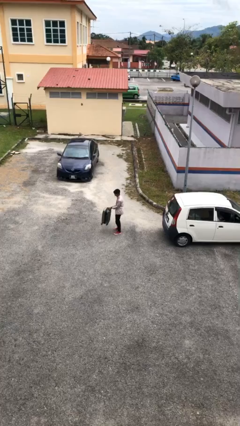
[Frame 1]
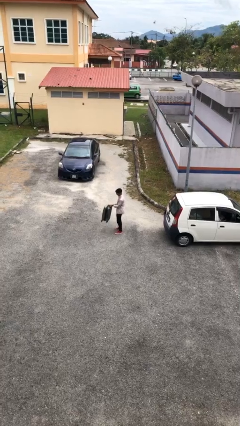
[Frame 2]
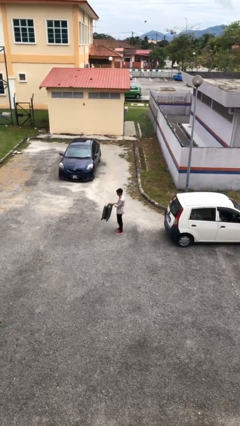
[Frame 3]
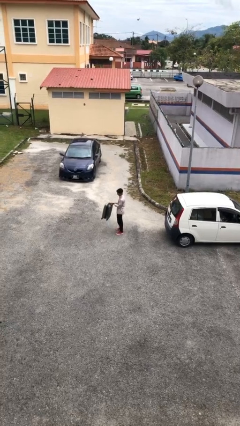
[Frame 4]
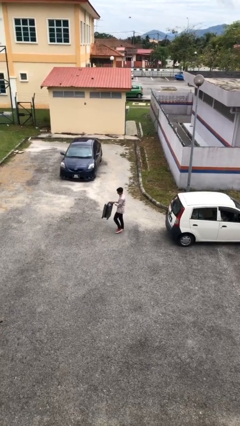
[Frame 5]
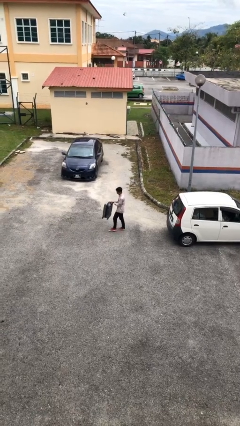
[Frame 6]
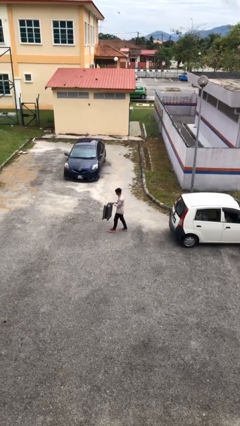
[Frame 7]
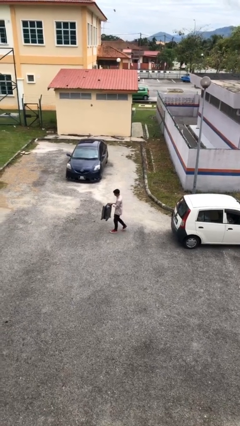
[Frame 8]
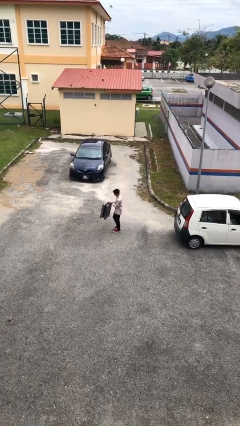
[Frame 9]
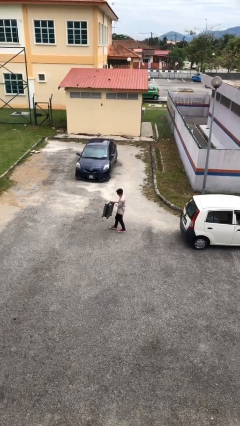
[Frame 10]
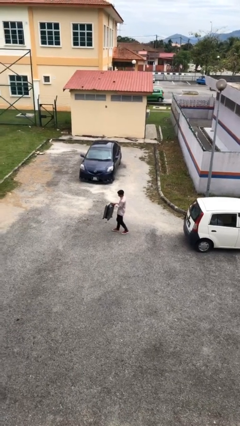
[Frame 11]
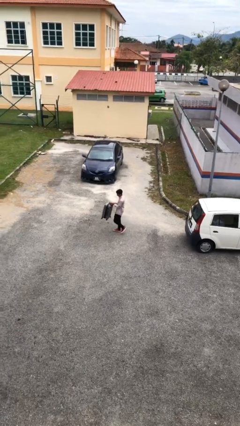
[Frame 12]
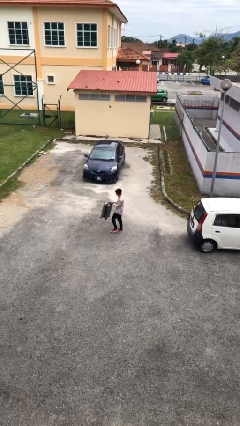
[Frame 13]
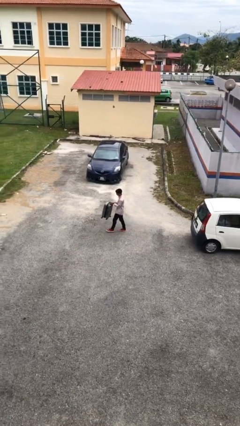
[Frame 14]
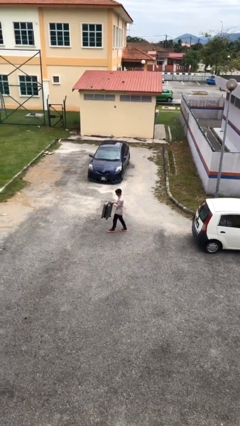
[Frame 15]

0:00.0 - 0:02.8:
person carries heavy object

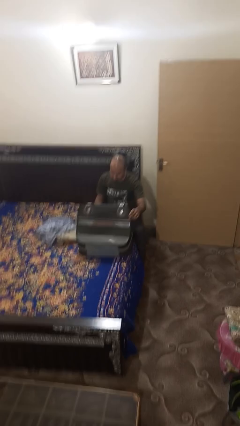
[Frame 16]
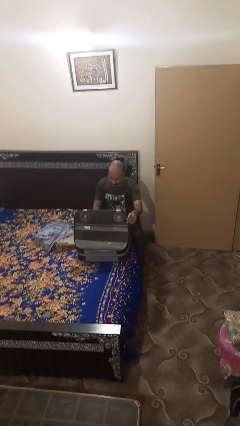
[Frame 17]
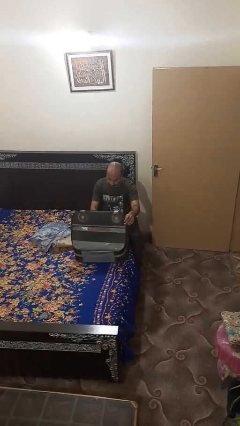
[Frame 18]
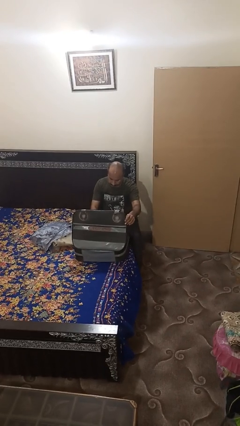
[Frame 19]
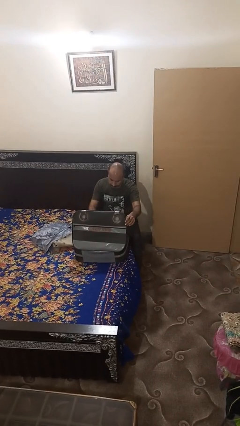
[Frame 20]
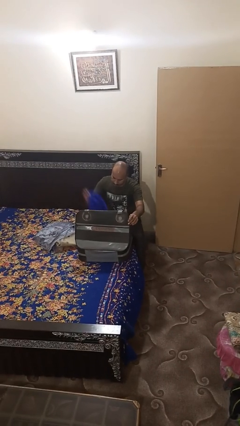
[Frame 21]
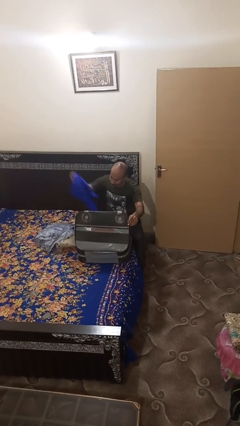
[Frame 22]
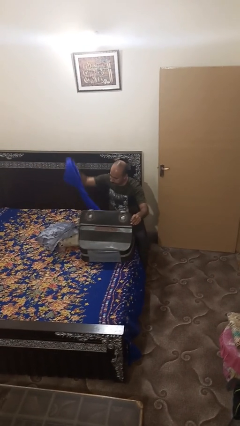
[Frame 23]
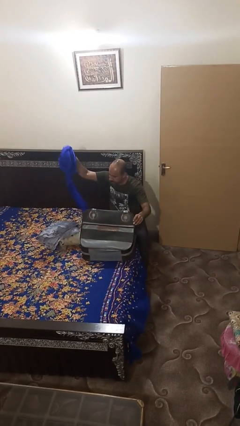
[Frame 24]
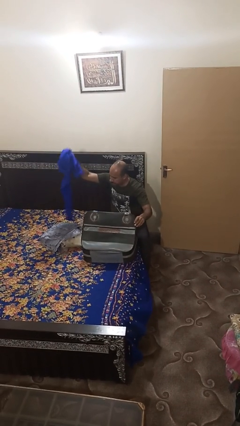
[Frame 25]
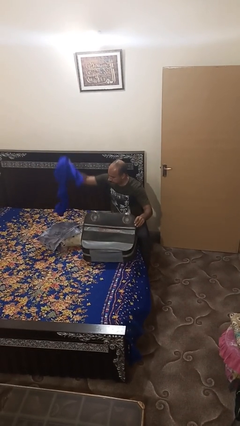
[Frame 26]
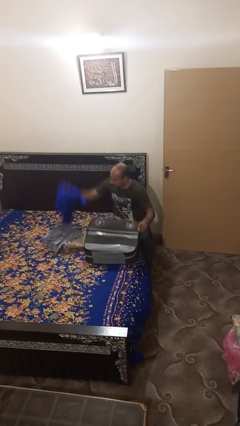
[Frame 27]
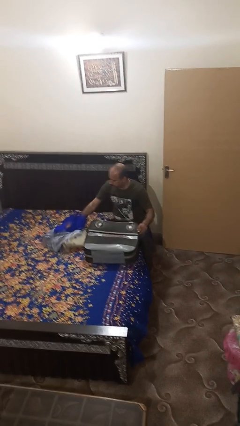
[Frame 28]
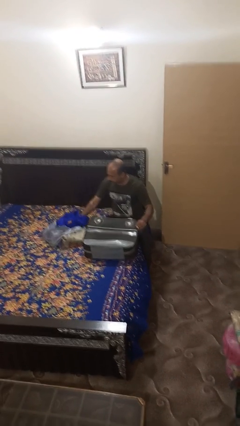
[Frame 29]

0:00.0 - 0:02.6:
person unloads clothes from suitcase

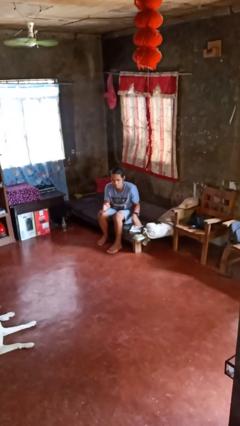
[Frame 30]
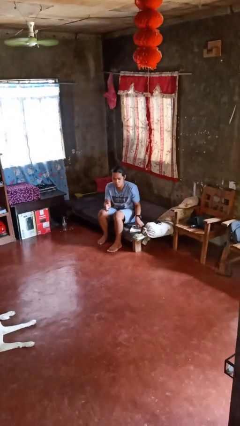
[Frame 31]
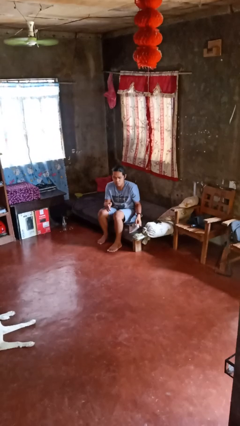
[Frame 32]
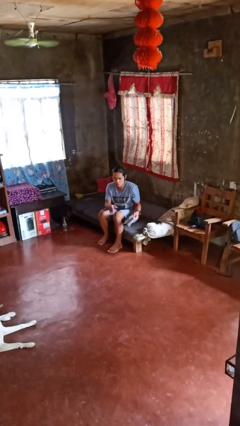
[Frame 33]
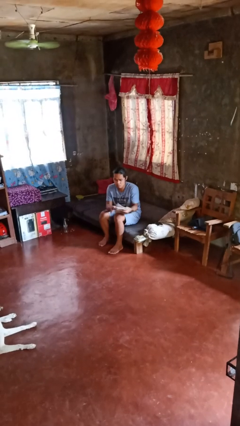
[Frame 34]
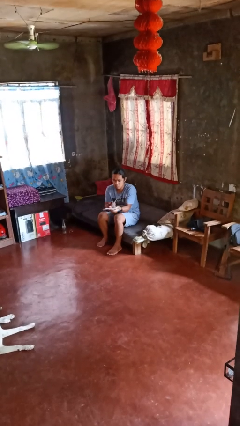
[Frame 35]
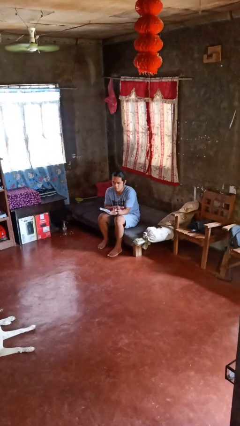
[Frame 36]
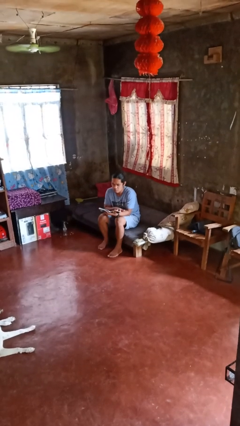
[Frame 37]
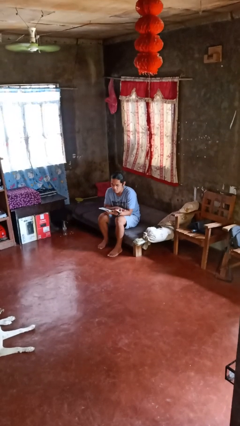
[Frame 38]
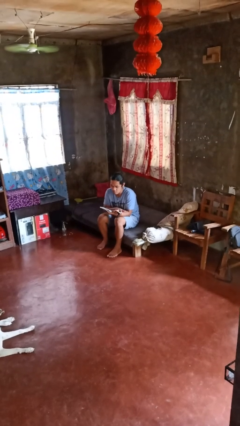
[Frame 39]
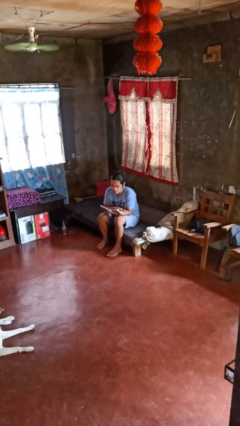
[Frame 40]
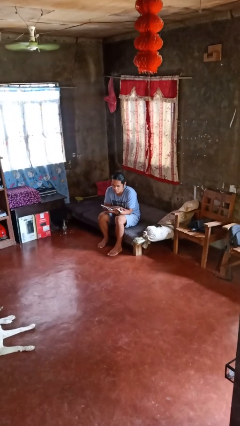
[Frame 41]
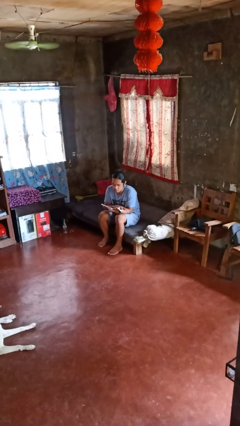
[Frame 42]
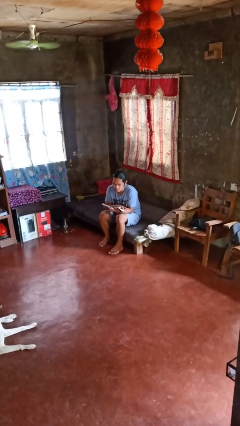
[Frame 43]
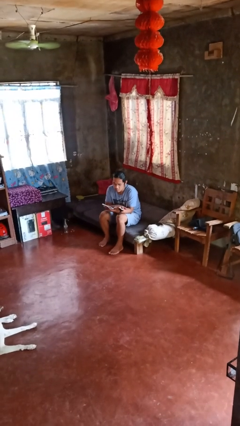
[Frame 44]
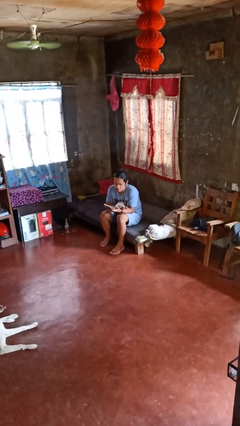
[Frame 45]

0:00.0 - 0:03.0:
person reads magazine

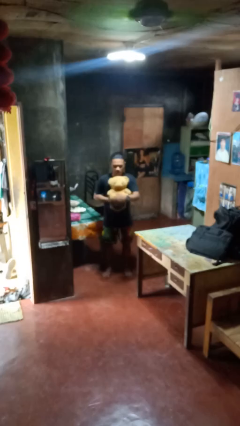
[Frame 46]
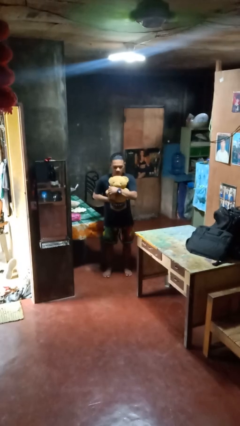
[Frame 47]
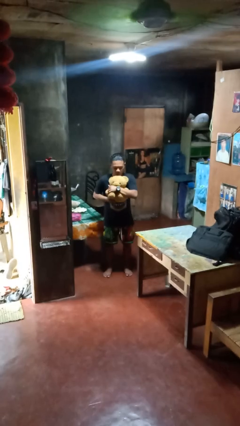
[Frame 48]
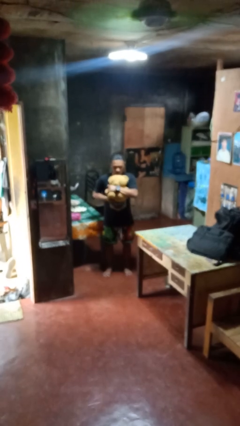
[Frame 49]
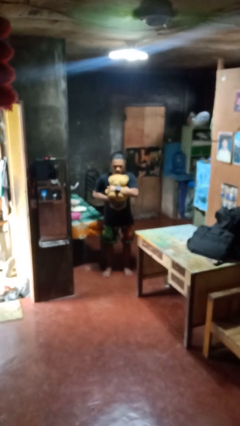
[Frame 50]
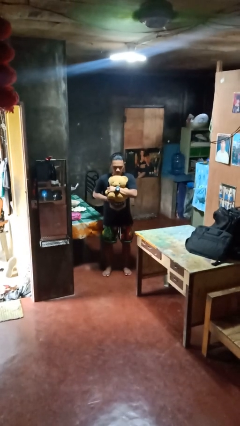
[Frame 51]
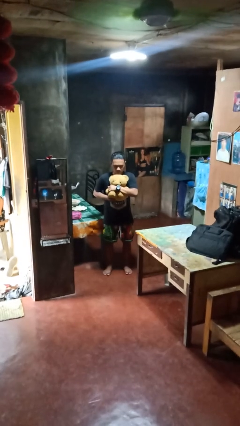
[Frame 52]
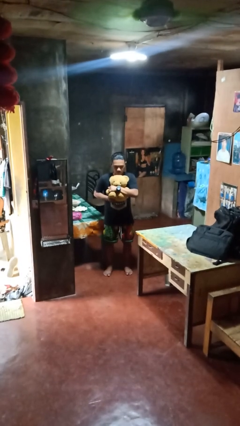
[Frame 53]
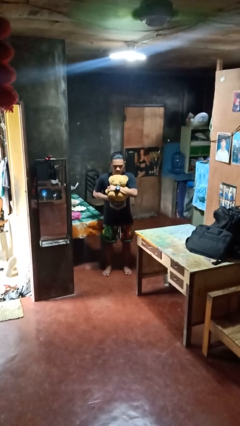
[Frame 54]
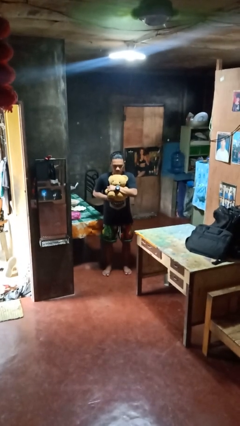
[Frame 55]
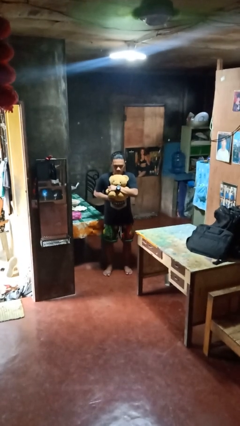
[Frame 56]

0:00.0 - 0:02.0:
person hugs stuffed animal

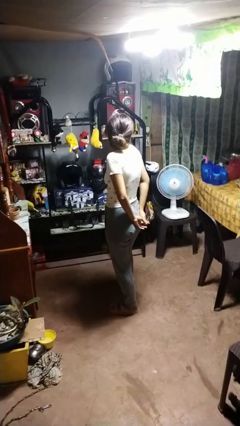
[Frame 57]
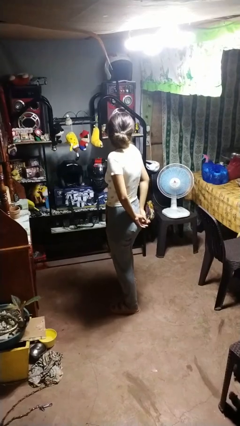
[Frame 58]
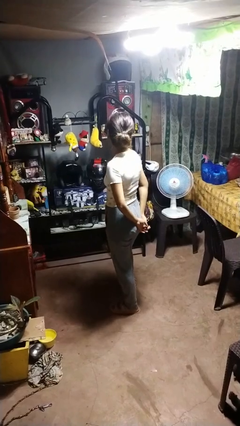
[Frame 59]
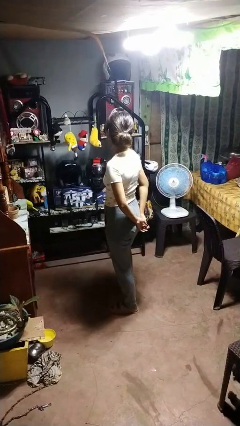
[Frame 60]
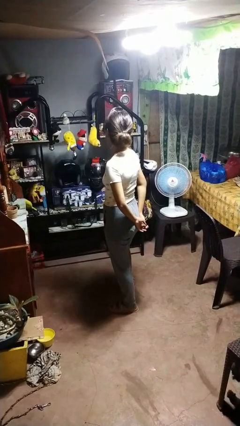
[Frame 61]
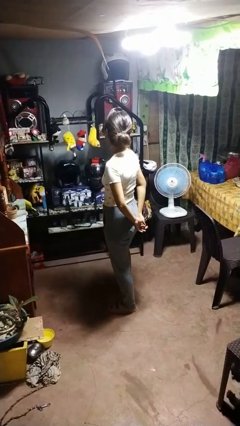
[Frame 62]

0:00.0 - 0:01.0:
person shrugs

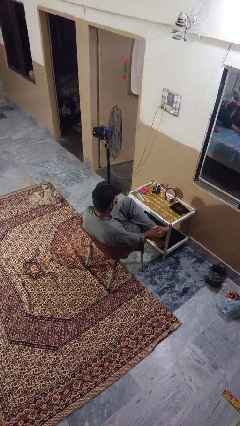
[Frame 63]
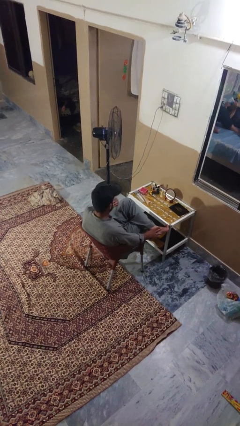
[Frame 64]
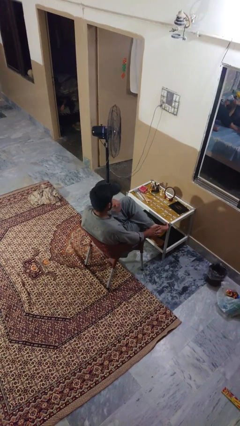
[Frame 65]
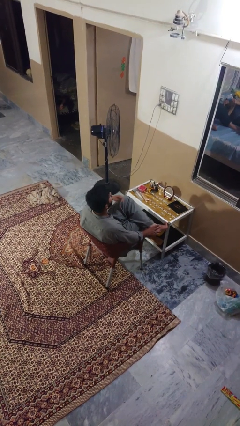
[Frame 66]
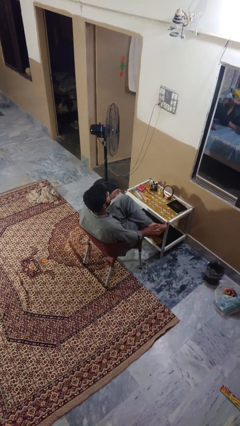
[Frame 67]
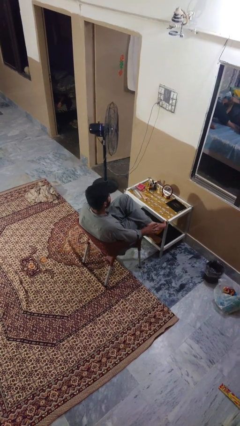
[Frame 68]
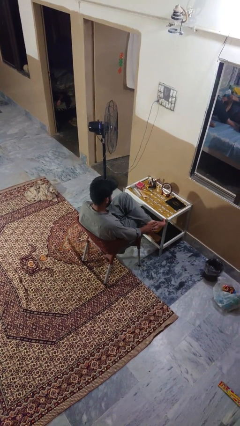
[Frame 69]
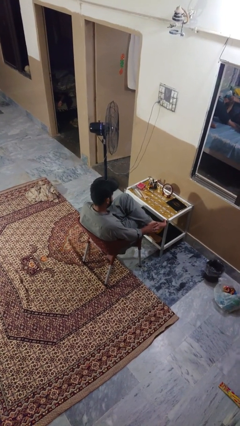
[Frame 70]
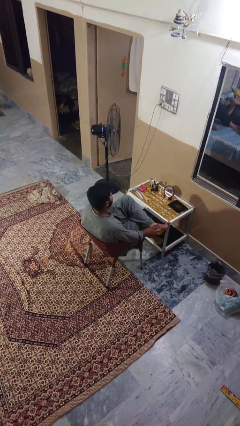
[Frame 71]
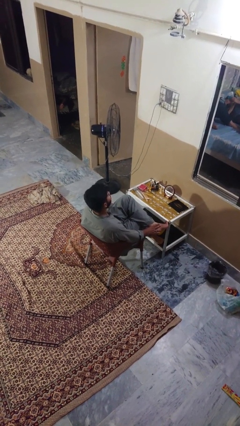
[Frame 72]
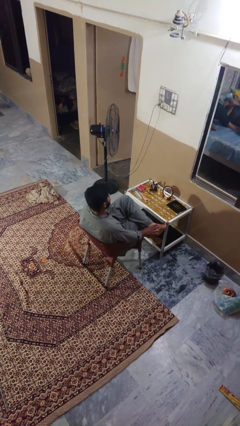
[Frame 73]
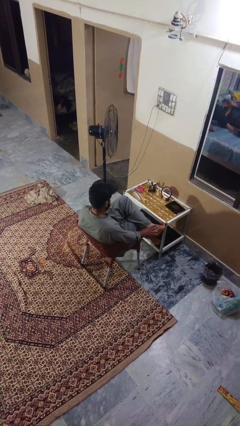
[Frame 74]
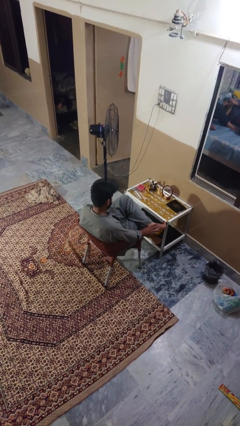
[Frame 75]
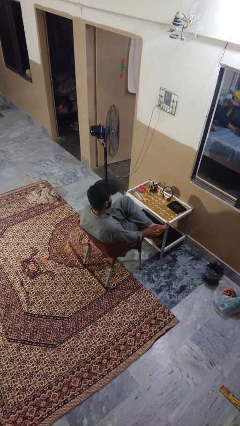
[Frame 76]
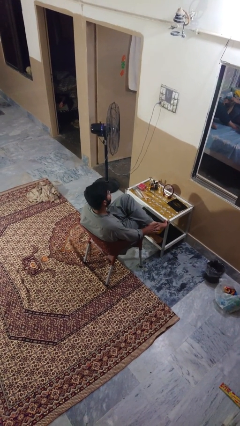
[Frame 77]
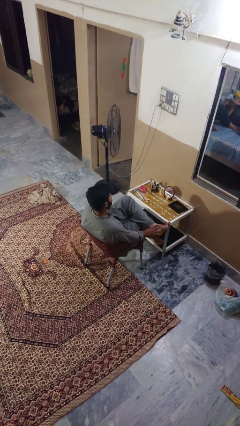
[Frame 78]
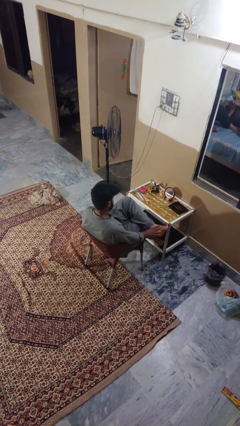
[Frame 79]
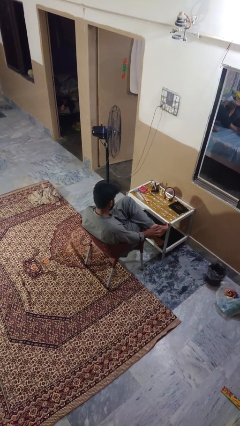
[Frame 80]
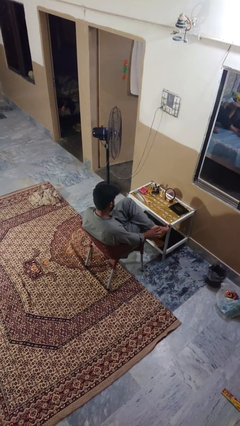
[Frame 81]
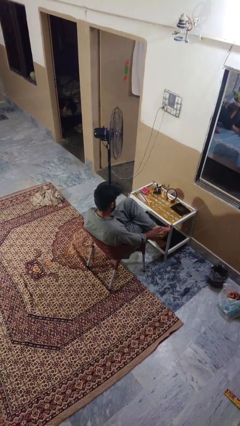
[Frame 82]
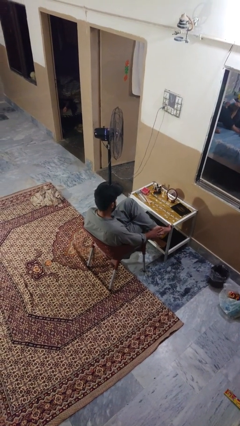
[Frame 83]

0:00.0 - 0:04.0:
person nods head

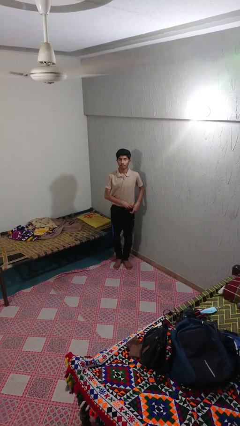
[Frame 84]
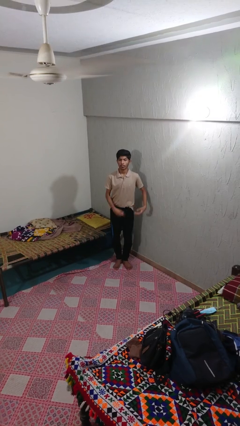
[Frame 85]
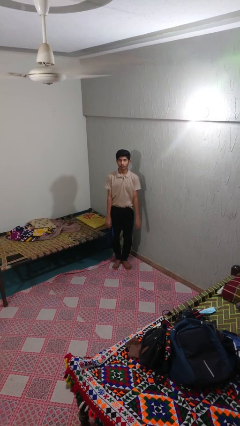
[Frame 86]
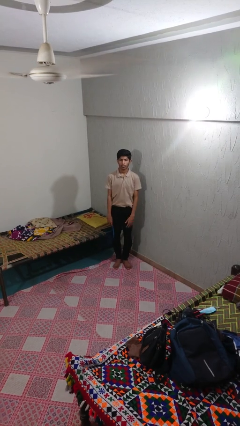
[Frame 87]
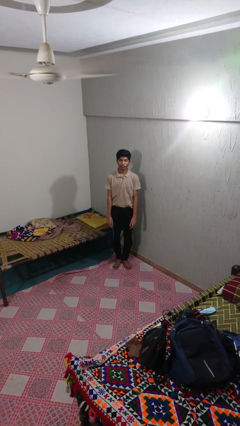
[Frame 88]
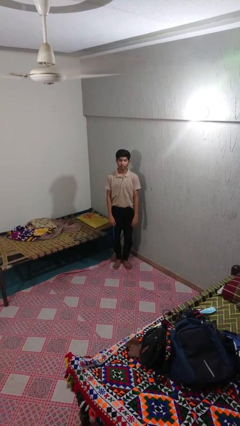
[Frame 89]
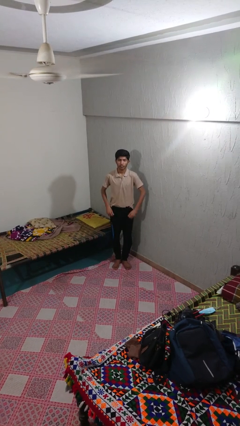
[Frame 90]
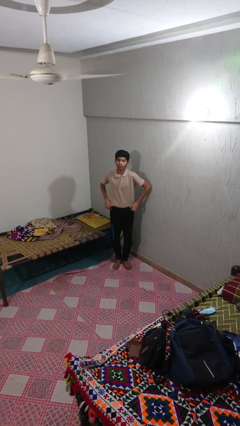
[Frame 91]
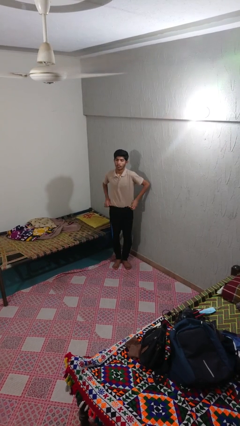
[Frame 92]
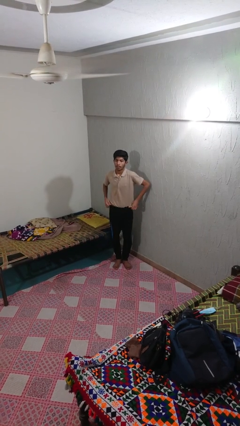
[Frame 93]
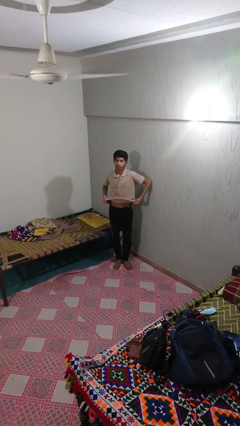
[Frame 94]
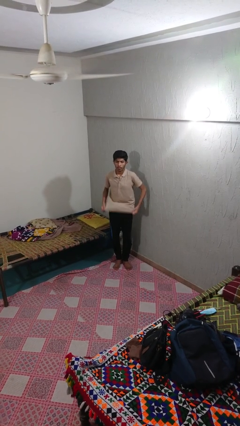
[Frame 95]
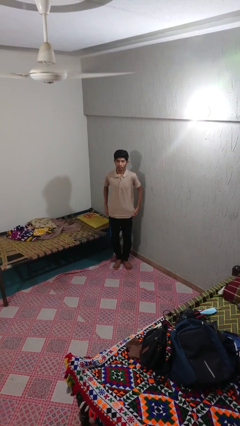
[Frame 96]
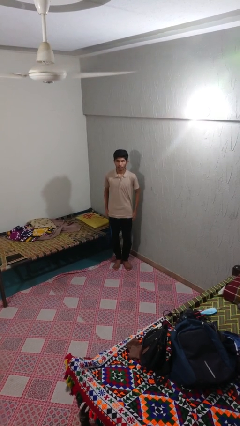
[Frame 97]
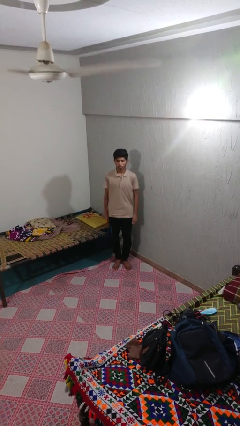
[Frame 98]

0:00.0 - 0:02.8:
person untucks shirt
